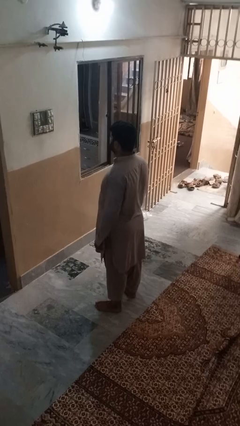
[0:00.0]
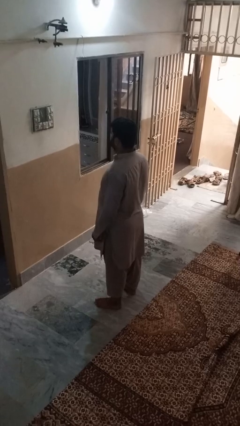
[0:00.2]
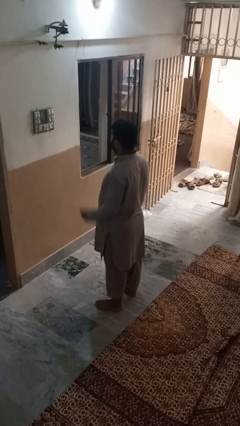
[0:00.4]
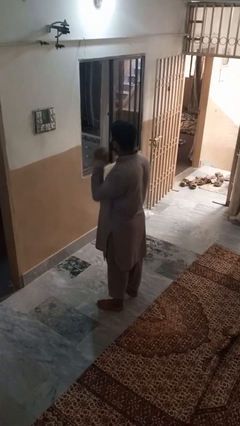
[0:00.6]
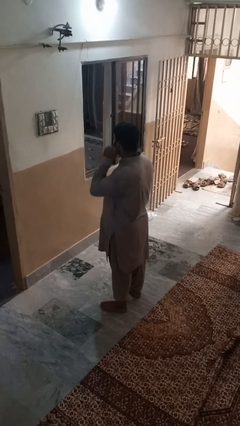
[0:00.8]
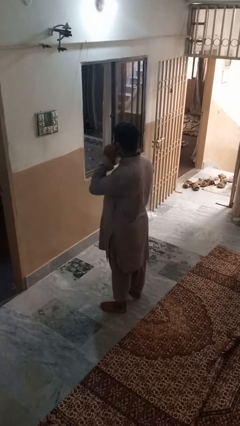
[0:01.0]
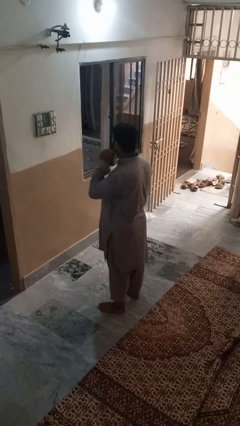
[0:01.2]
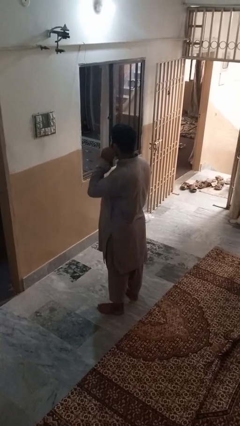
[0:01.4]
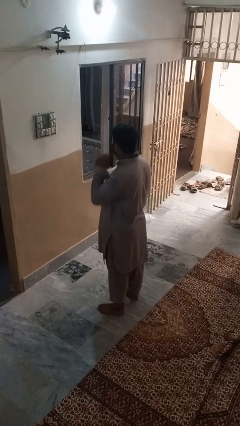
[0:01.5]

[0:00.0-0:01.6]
person touches earlobe

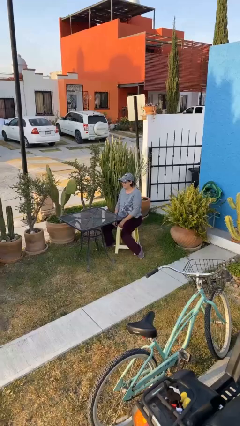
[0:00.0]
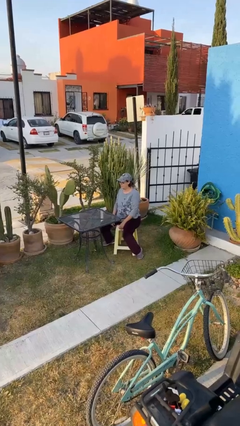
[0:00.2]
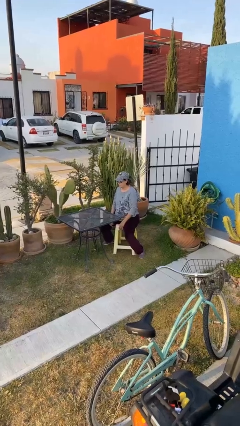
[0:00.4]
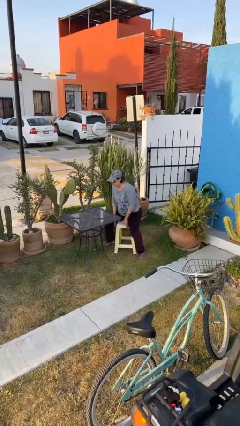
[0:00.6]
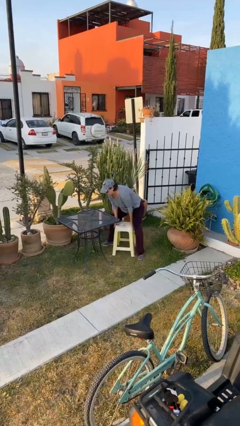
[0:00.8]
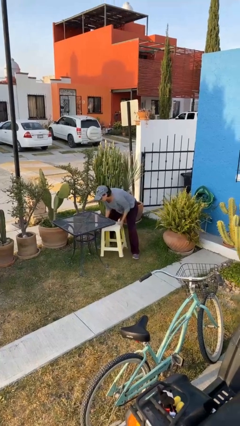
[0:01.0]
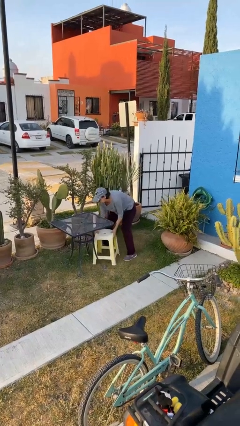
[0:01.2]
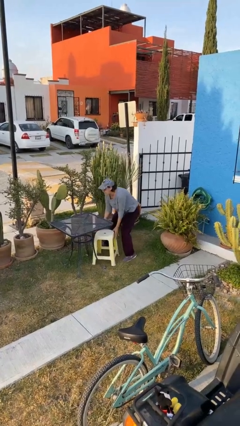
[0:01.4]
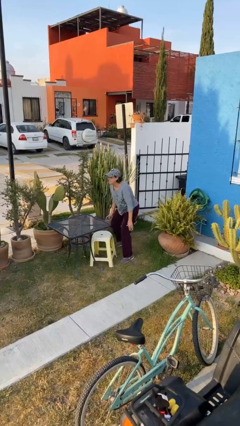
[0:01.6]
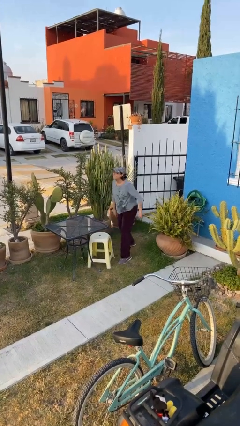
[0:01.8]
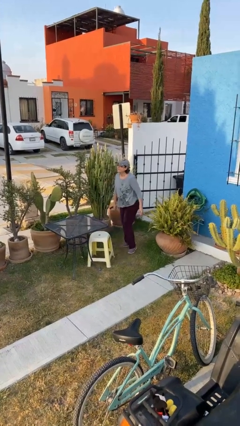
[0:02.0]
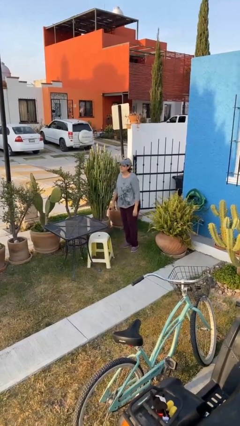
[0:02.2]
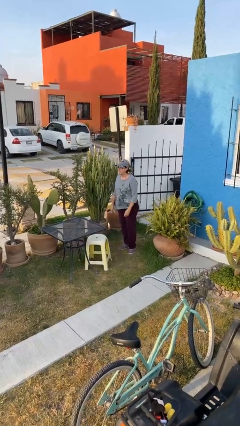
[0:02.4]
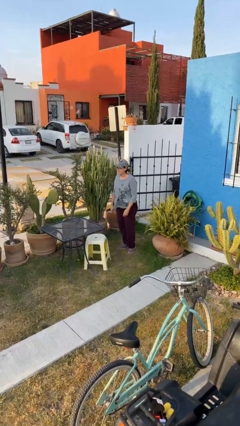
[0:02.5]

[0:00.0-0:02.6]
person stands up

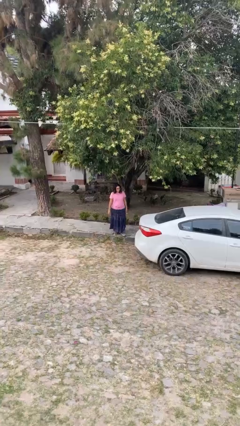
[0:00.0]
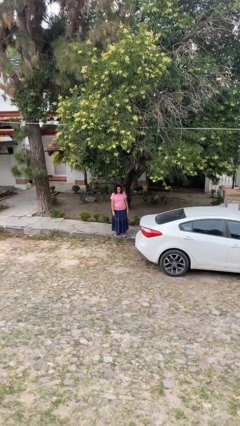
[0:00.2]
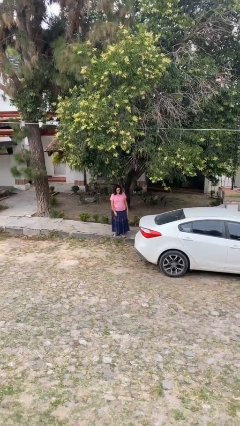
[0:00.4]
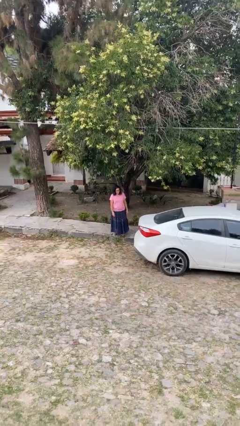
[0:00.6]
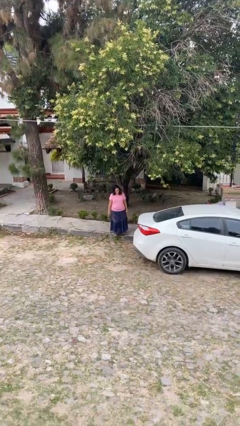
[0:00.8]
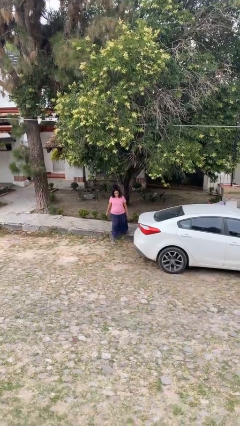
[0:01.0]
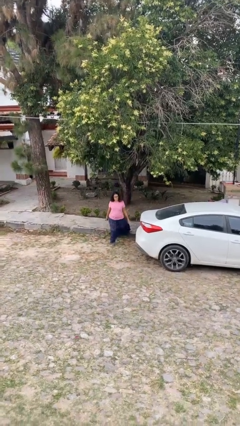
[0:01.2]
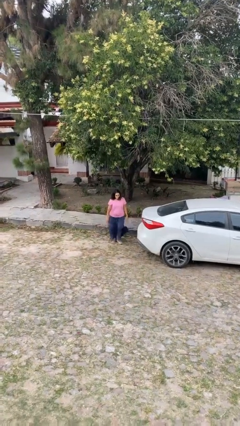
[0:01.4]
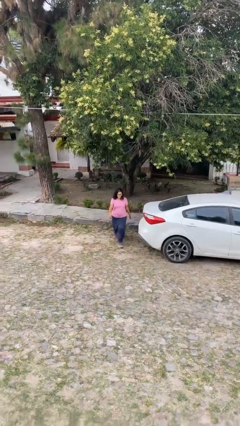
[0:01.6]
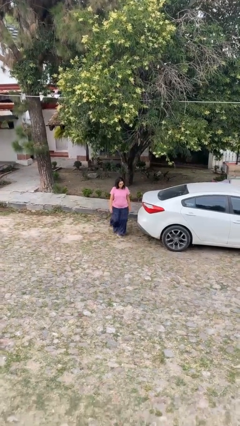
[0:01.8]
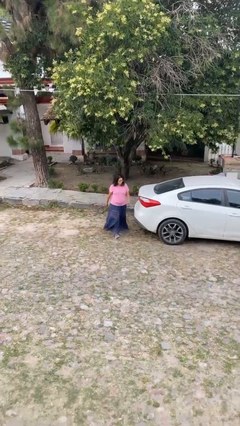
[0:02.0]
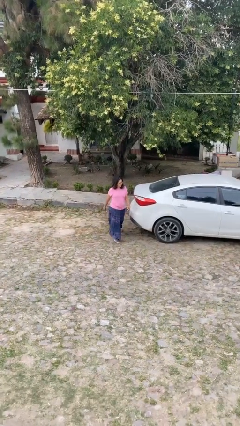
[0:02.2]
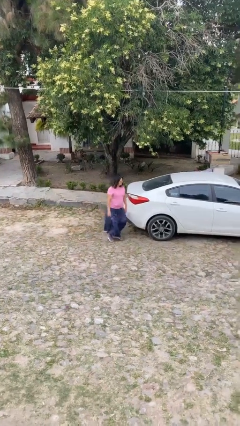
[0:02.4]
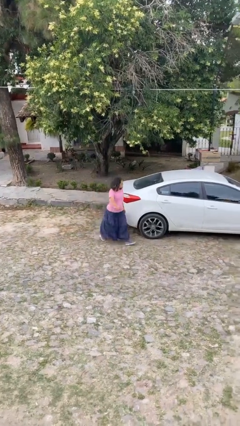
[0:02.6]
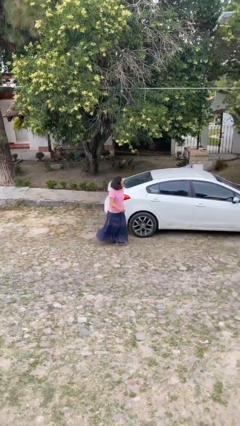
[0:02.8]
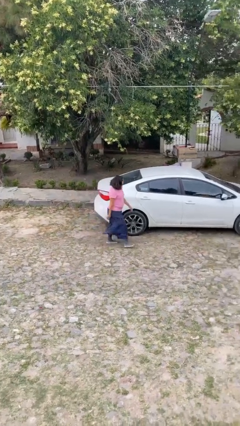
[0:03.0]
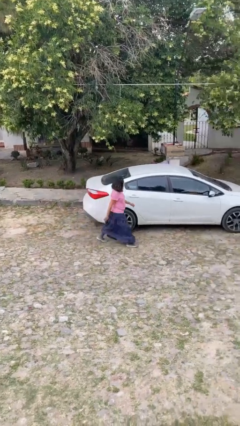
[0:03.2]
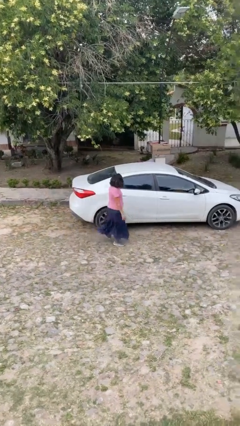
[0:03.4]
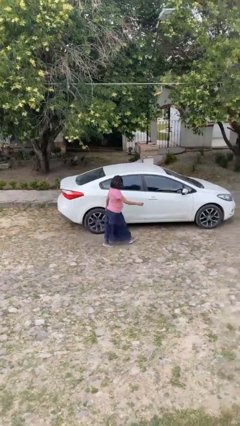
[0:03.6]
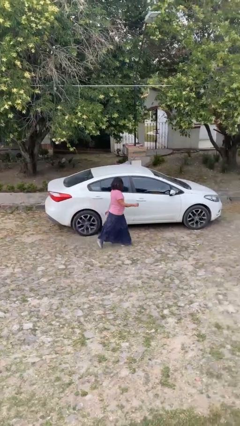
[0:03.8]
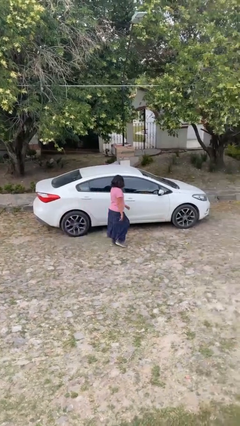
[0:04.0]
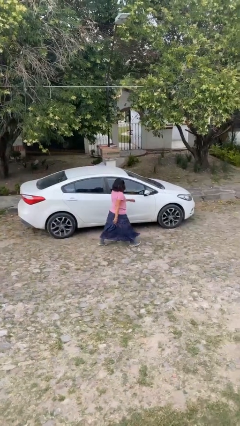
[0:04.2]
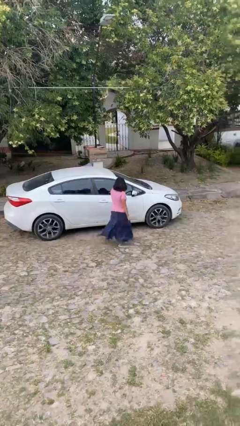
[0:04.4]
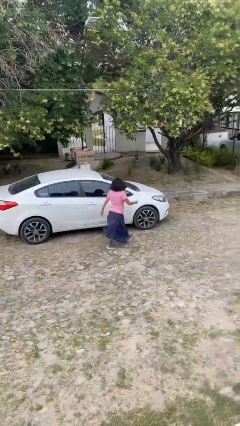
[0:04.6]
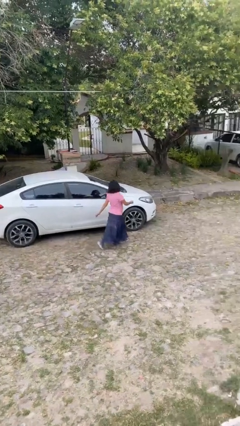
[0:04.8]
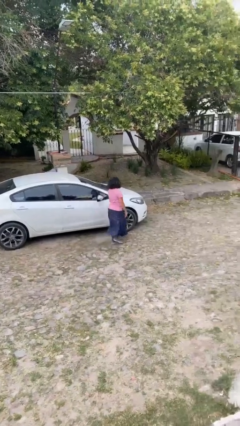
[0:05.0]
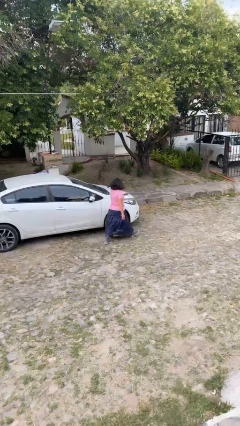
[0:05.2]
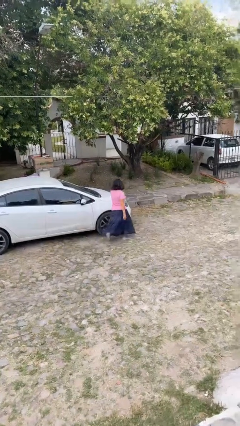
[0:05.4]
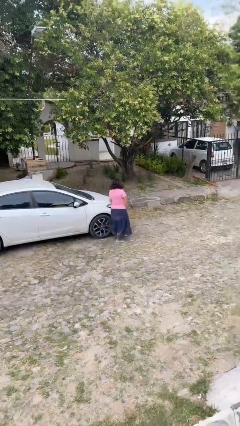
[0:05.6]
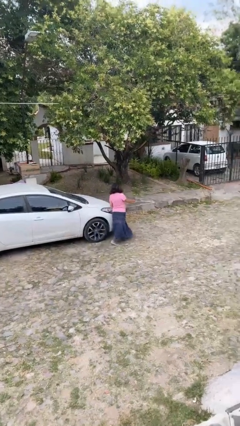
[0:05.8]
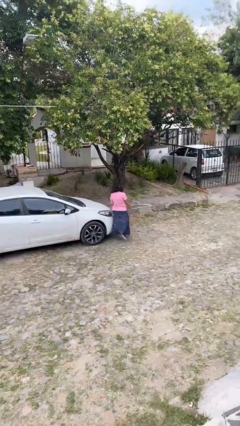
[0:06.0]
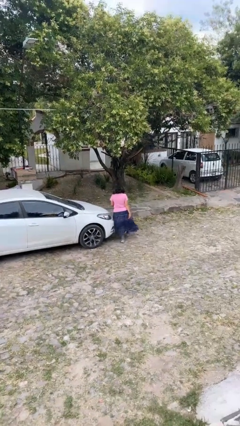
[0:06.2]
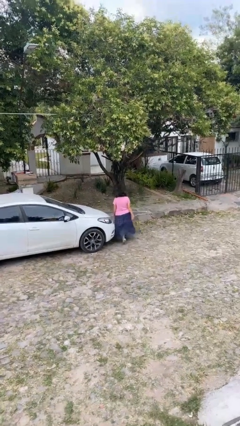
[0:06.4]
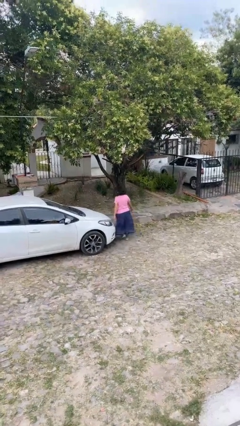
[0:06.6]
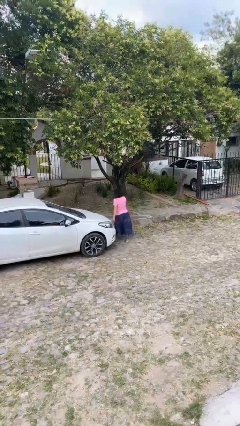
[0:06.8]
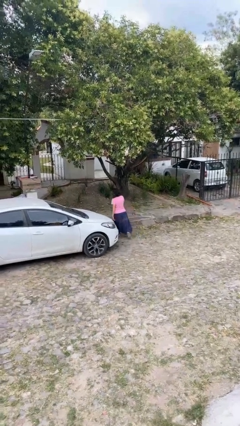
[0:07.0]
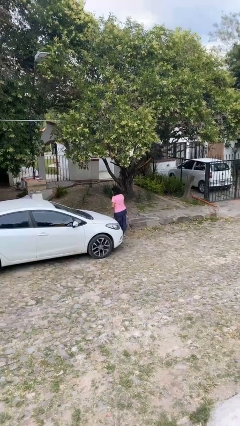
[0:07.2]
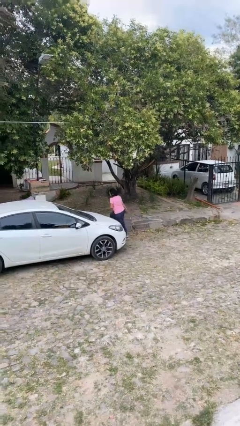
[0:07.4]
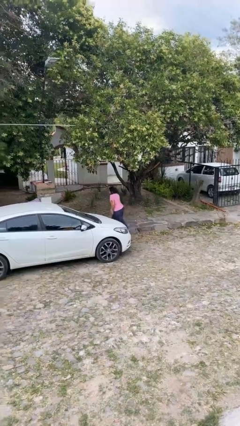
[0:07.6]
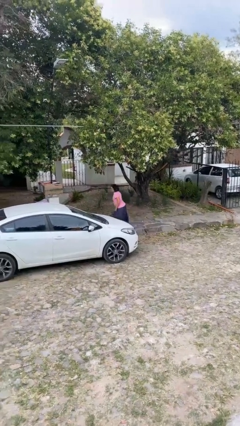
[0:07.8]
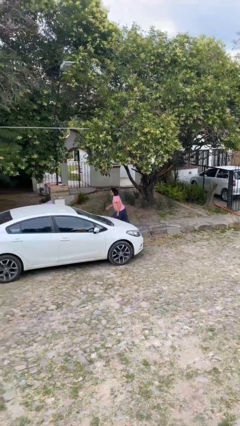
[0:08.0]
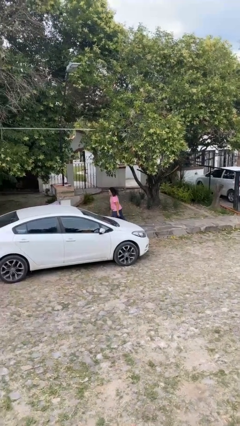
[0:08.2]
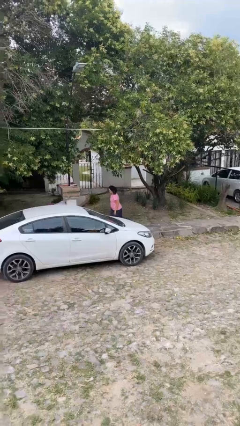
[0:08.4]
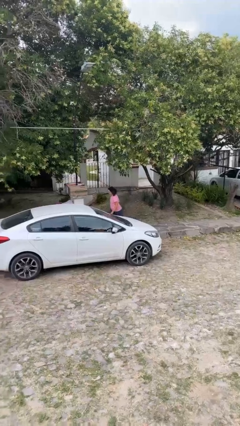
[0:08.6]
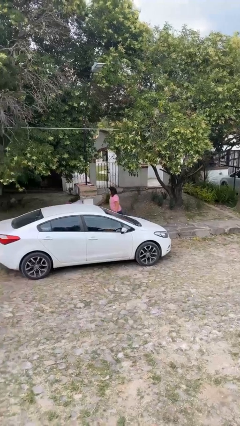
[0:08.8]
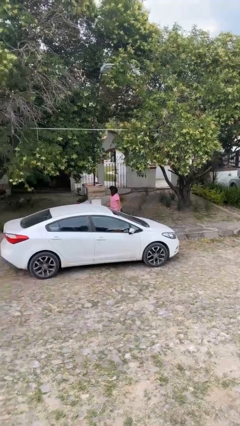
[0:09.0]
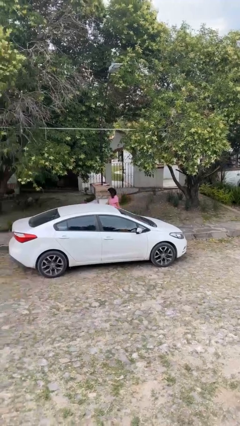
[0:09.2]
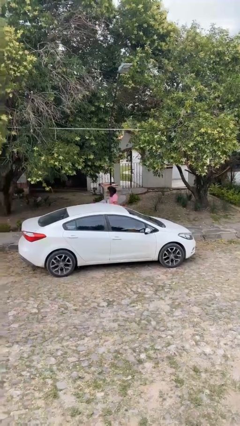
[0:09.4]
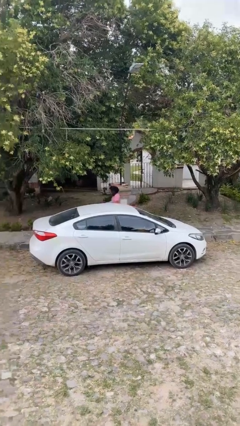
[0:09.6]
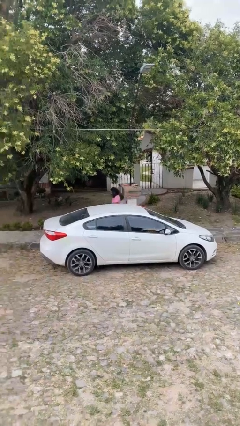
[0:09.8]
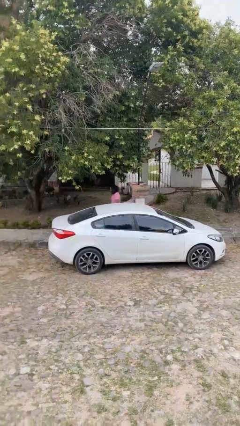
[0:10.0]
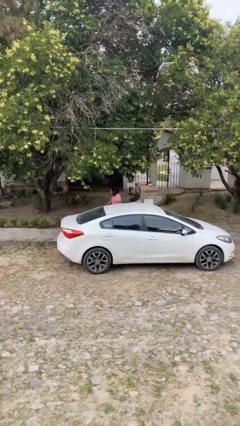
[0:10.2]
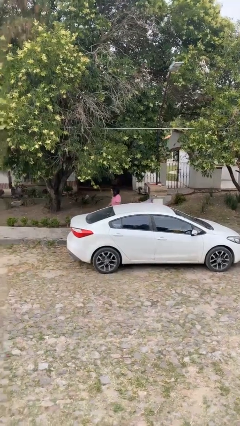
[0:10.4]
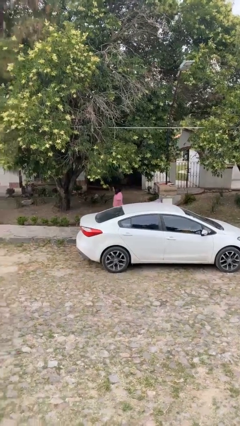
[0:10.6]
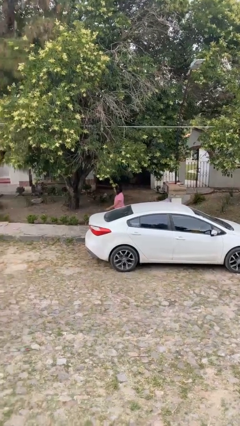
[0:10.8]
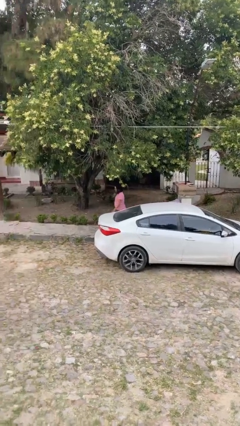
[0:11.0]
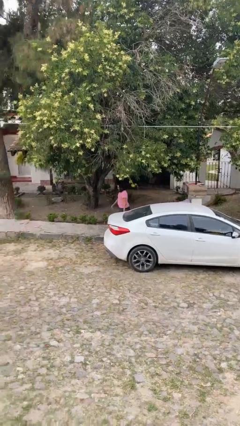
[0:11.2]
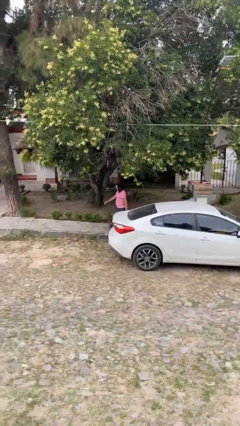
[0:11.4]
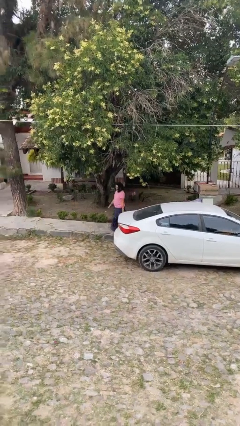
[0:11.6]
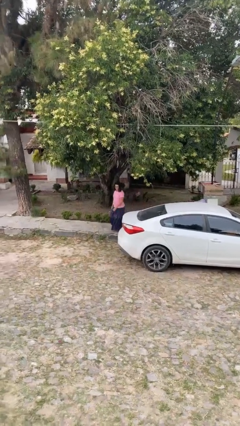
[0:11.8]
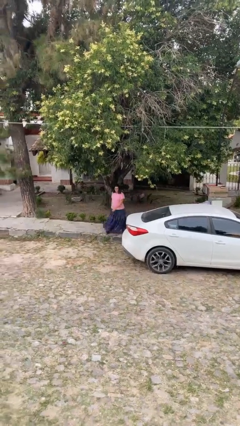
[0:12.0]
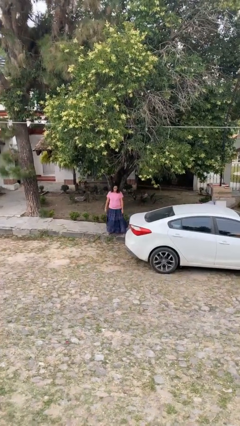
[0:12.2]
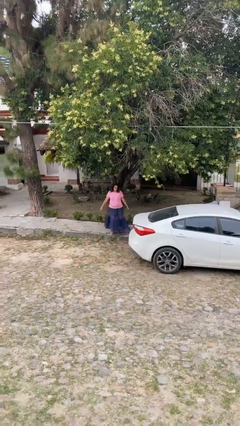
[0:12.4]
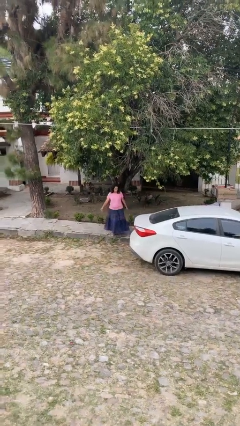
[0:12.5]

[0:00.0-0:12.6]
person walks around car

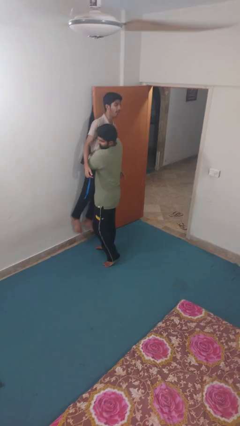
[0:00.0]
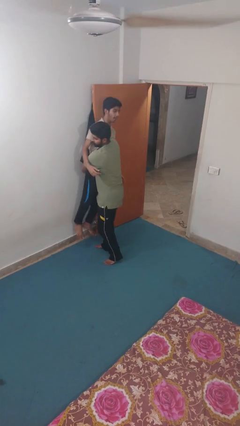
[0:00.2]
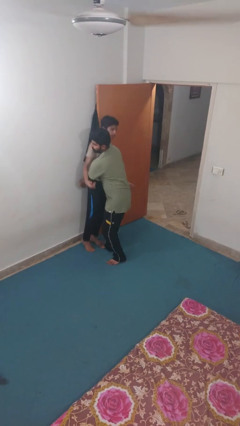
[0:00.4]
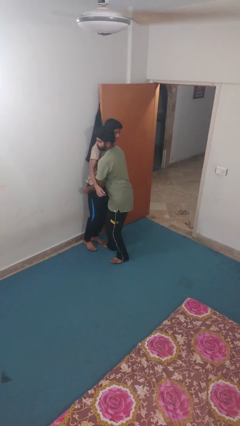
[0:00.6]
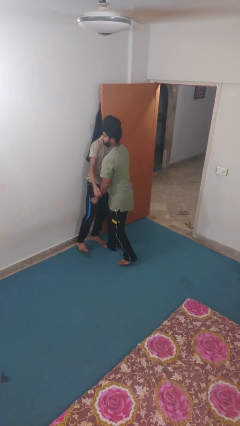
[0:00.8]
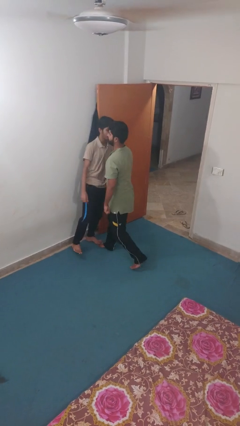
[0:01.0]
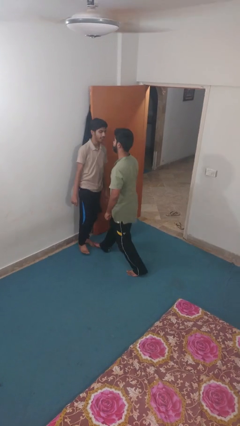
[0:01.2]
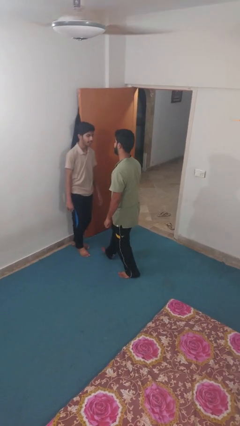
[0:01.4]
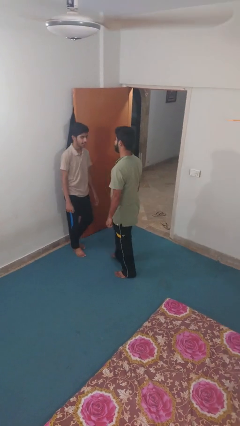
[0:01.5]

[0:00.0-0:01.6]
person puts down person
